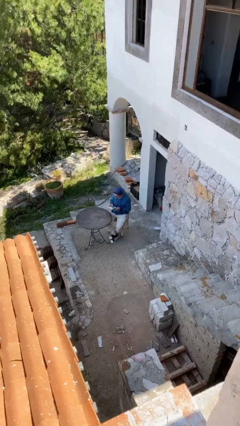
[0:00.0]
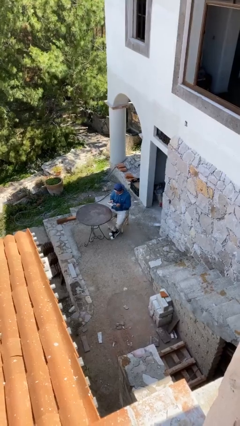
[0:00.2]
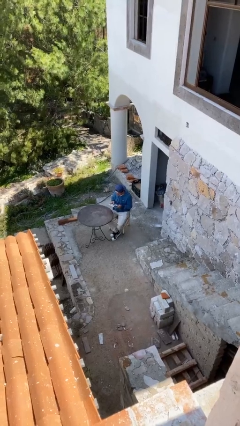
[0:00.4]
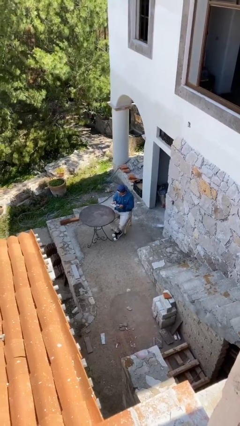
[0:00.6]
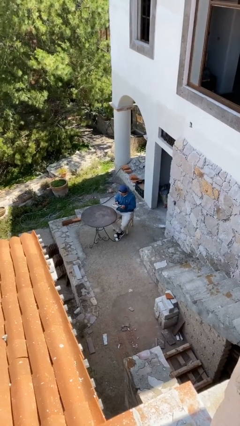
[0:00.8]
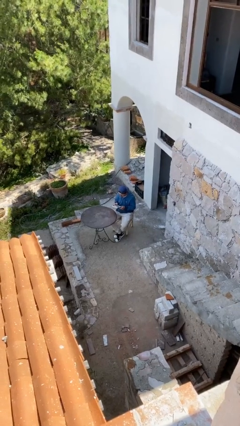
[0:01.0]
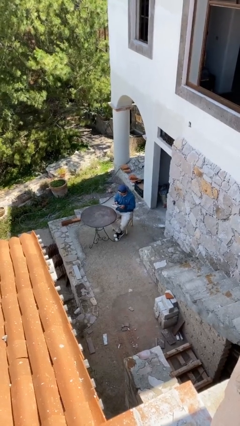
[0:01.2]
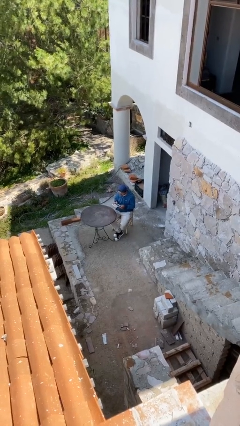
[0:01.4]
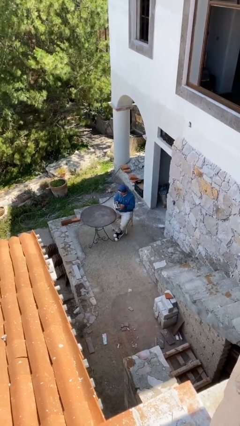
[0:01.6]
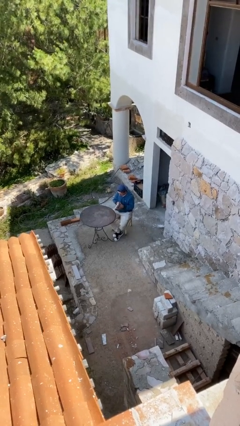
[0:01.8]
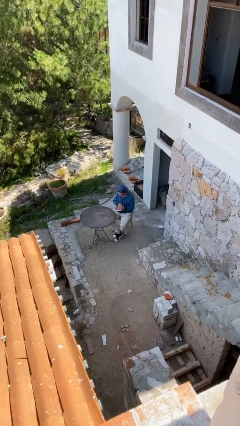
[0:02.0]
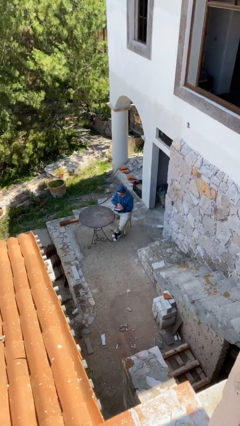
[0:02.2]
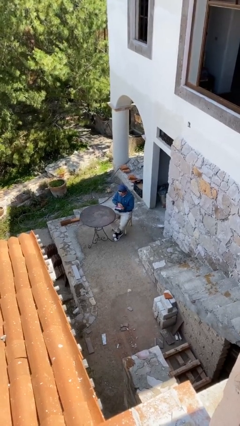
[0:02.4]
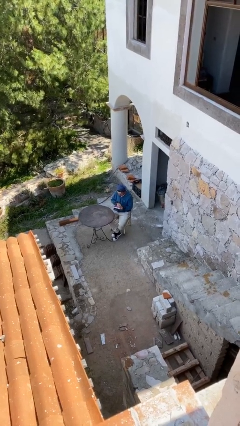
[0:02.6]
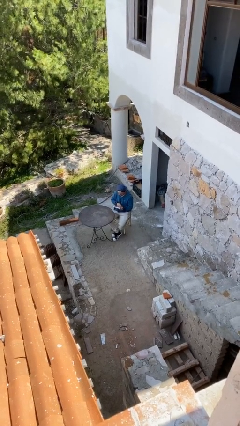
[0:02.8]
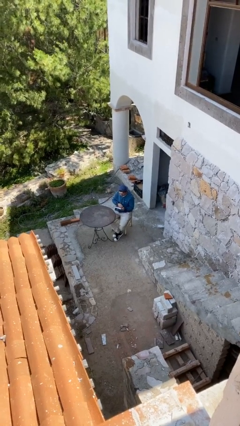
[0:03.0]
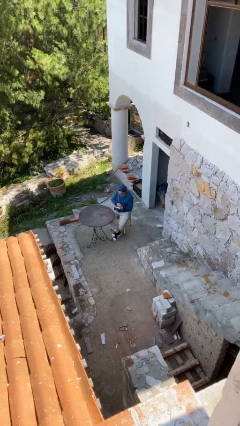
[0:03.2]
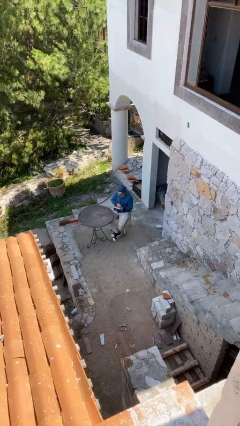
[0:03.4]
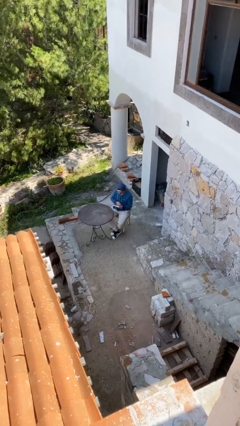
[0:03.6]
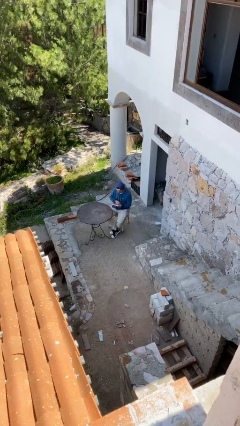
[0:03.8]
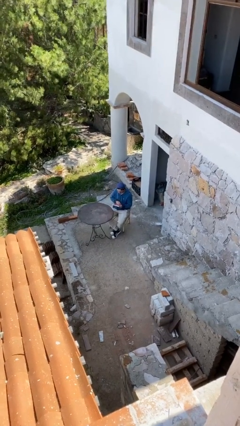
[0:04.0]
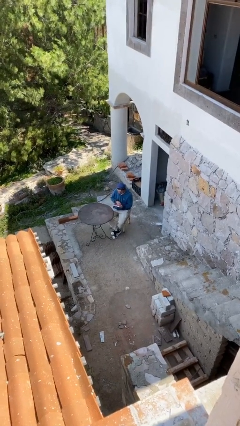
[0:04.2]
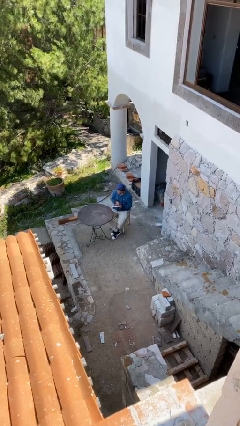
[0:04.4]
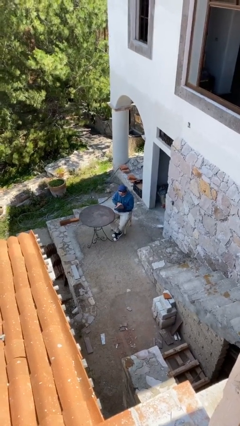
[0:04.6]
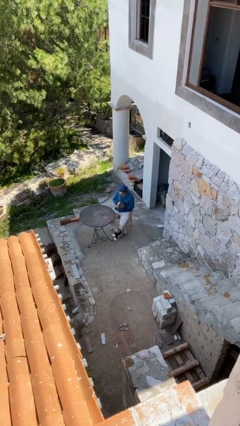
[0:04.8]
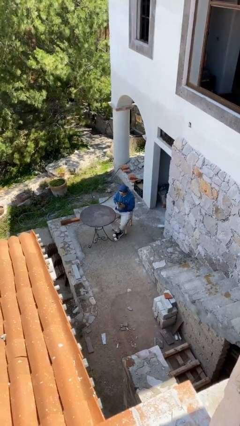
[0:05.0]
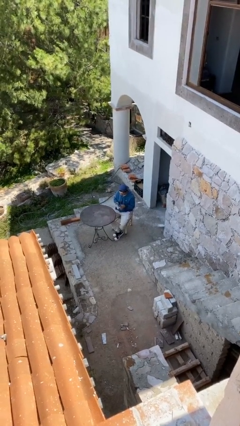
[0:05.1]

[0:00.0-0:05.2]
person reads document

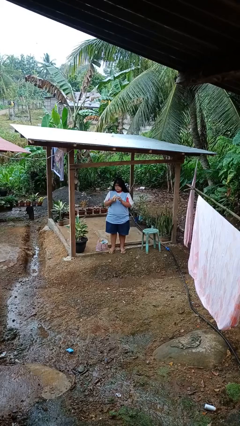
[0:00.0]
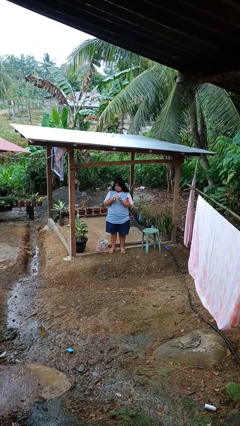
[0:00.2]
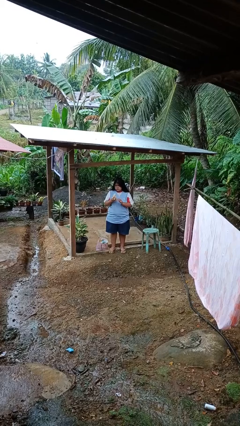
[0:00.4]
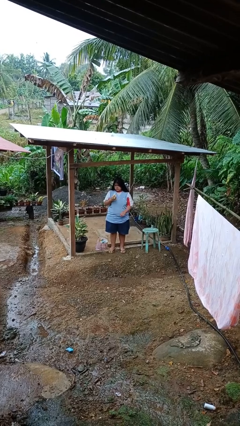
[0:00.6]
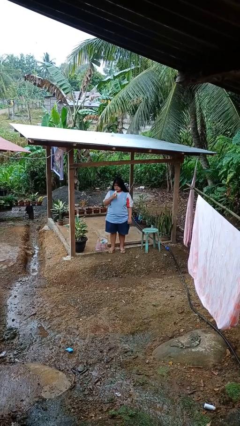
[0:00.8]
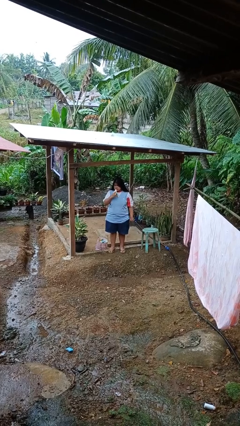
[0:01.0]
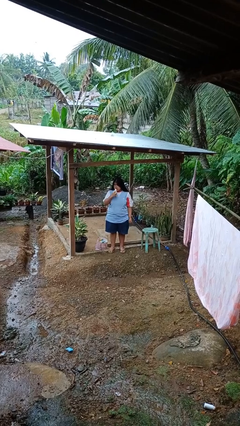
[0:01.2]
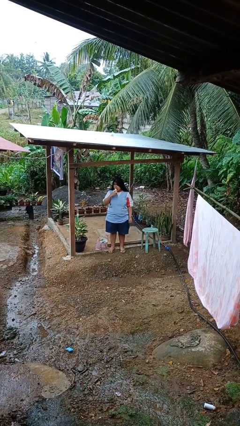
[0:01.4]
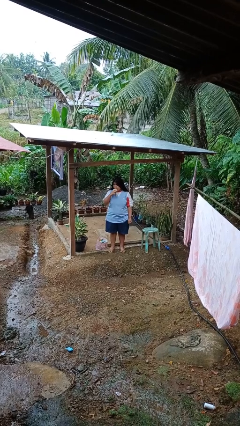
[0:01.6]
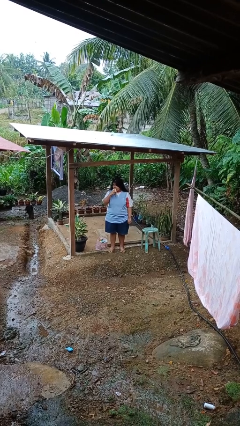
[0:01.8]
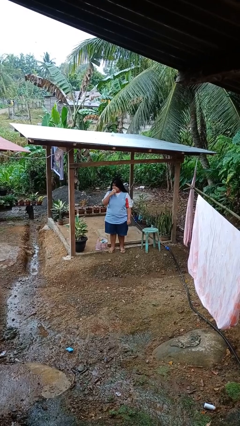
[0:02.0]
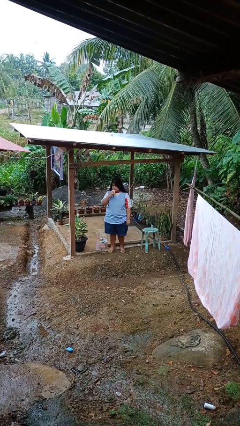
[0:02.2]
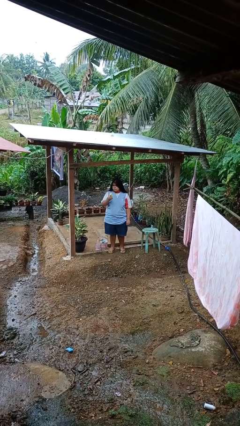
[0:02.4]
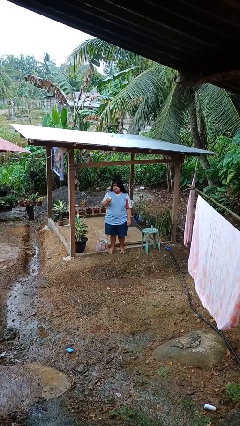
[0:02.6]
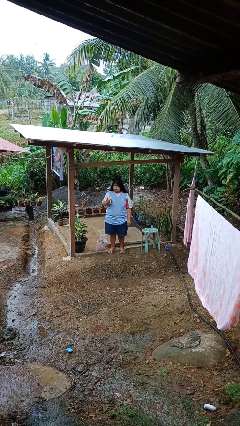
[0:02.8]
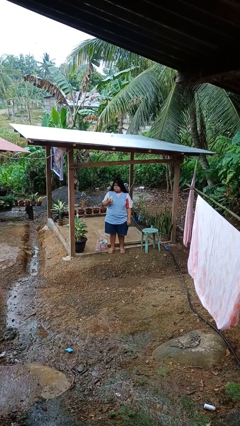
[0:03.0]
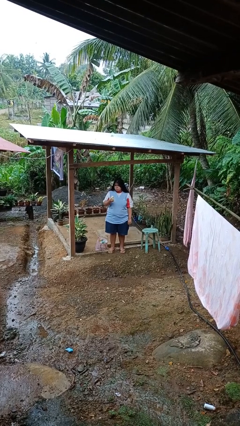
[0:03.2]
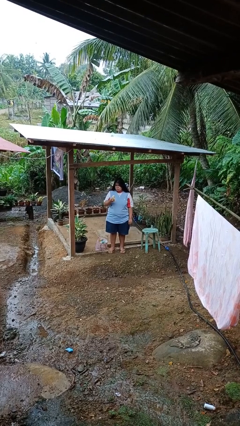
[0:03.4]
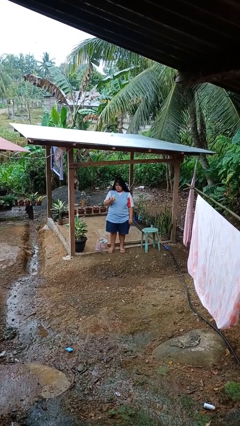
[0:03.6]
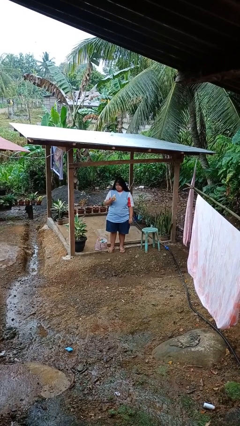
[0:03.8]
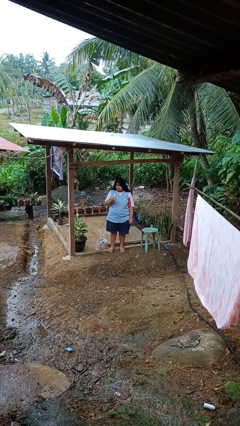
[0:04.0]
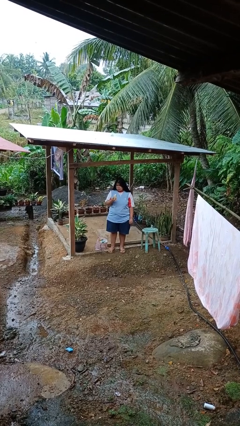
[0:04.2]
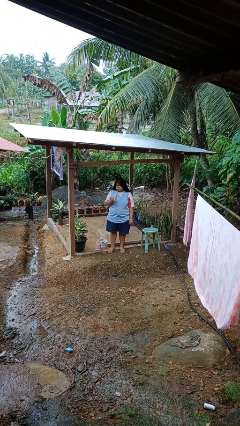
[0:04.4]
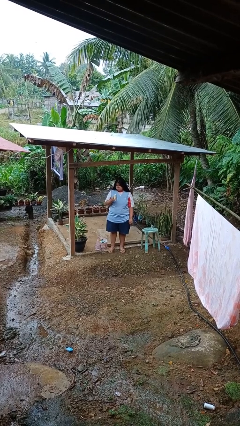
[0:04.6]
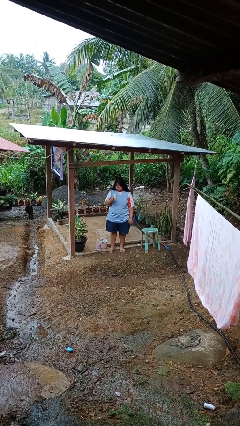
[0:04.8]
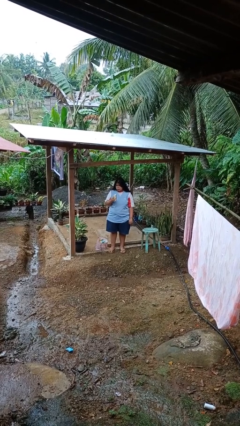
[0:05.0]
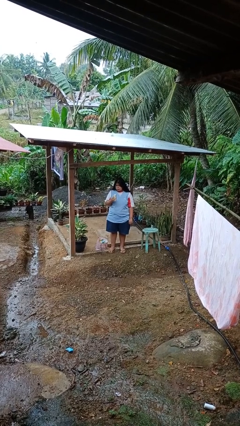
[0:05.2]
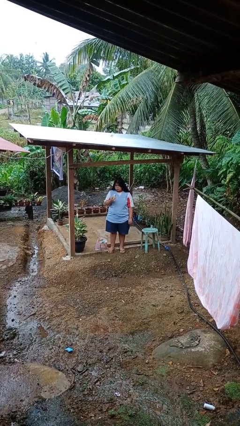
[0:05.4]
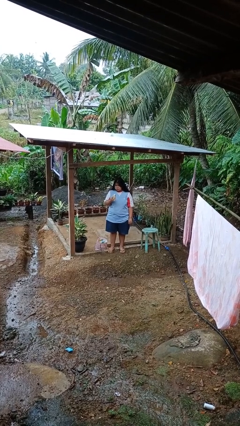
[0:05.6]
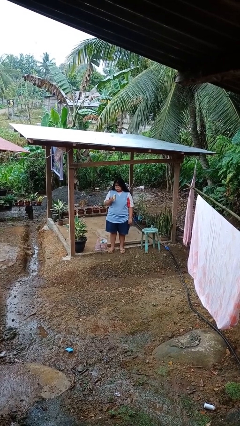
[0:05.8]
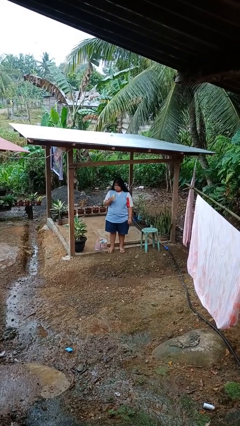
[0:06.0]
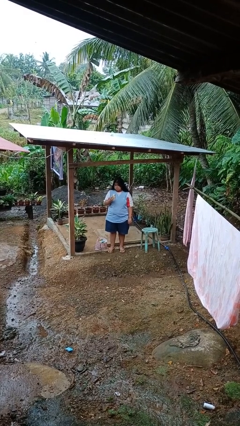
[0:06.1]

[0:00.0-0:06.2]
person eats banana

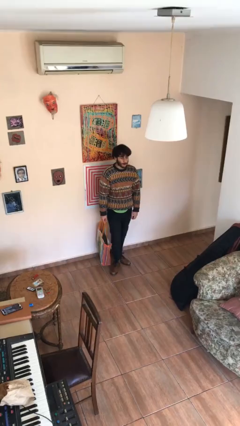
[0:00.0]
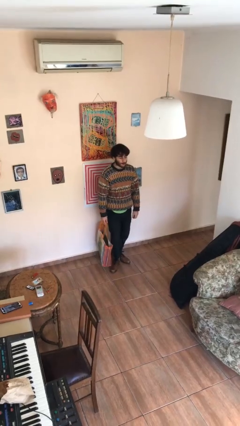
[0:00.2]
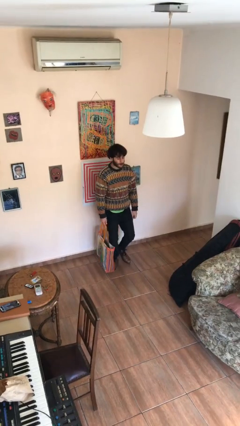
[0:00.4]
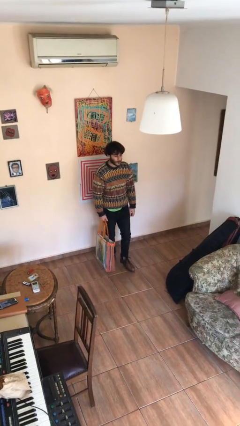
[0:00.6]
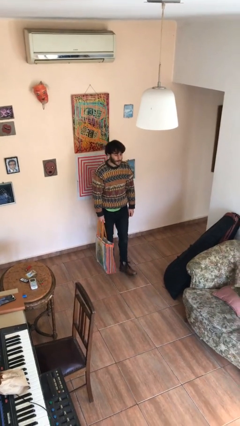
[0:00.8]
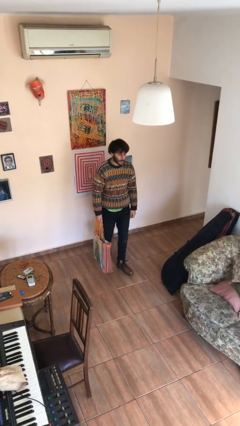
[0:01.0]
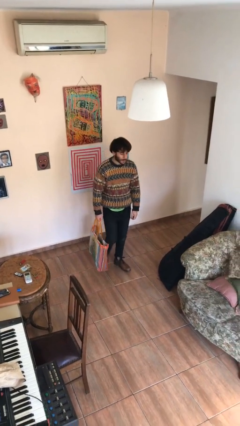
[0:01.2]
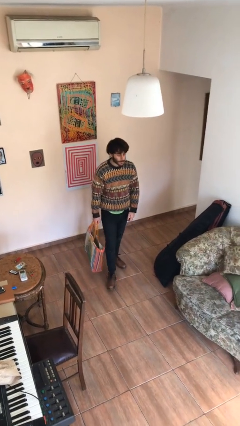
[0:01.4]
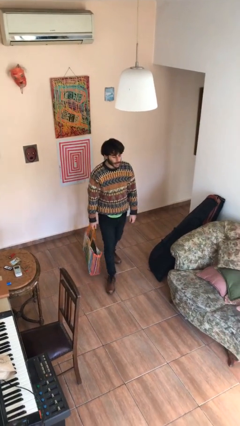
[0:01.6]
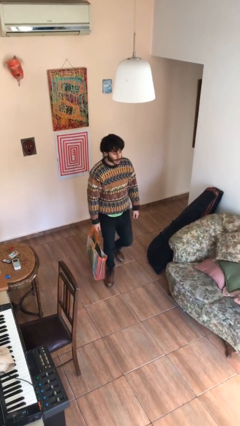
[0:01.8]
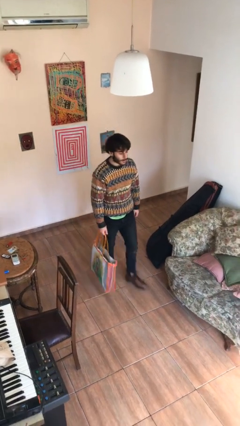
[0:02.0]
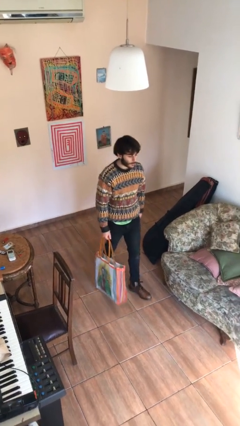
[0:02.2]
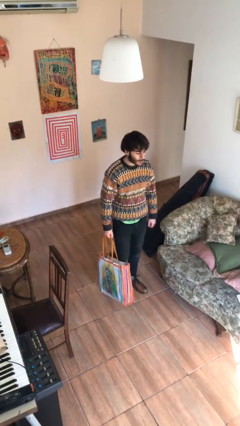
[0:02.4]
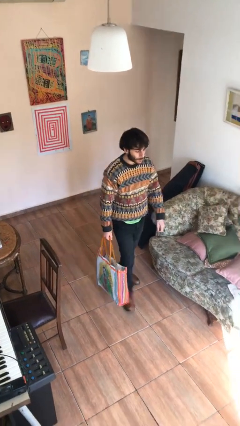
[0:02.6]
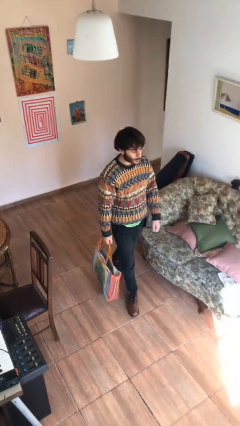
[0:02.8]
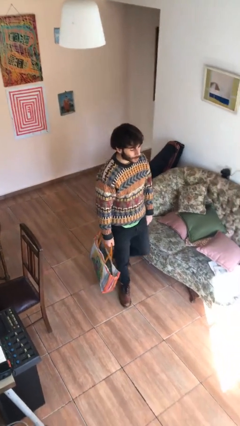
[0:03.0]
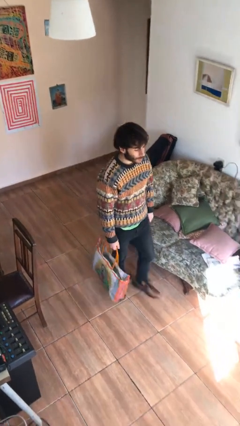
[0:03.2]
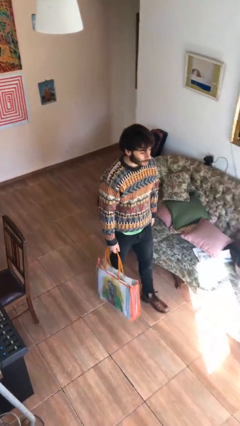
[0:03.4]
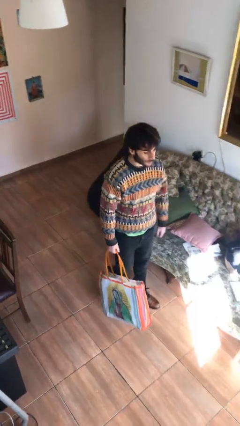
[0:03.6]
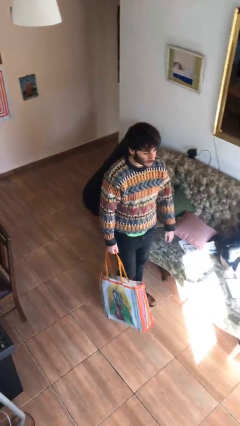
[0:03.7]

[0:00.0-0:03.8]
person carries groceries

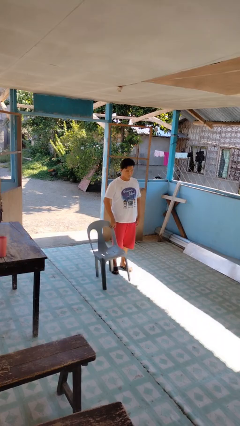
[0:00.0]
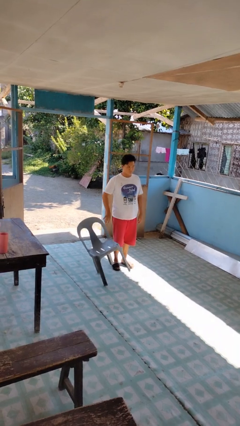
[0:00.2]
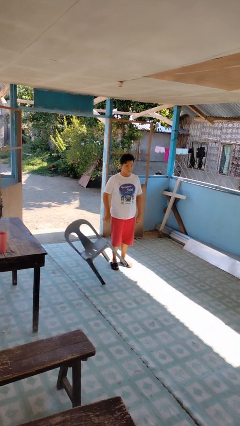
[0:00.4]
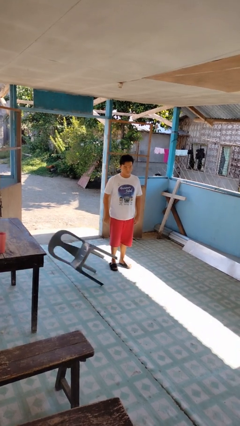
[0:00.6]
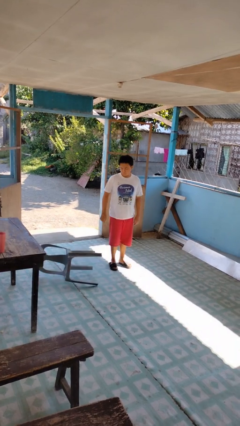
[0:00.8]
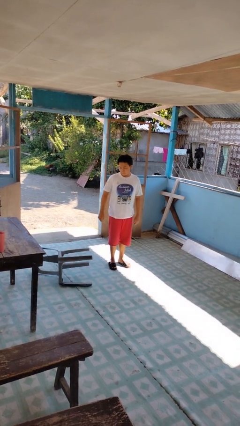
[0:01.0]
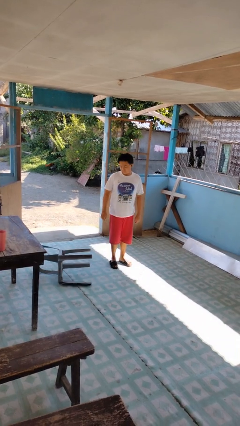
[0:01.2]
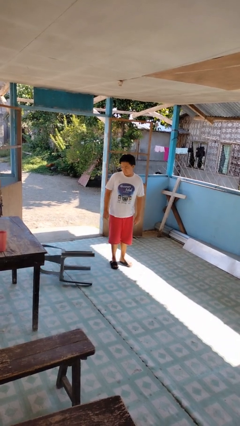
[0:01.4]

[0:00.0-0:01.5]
person knocks over furniture

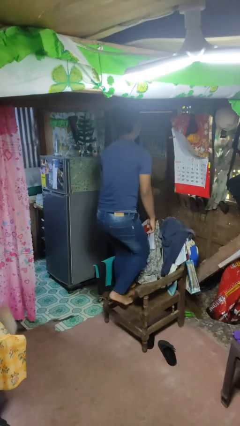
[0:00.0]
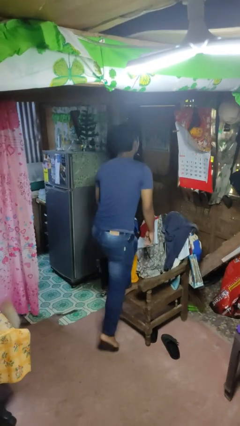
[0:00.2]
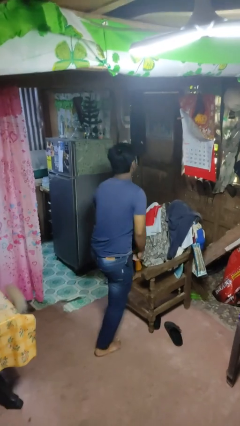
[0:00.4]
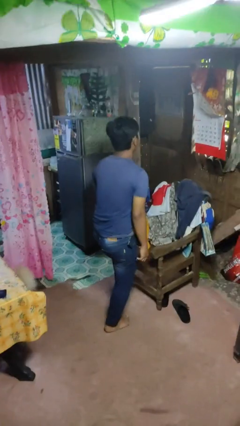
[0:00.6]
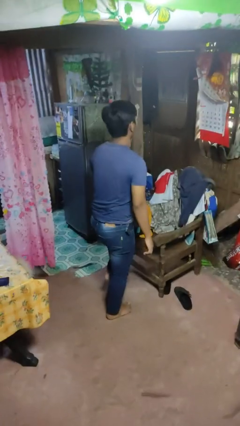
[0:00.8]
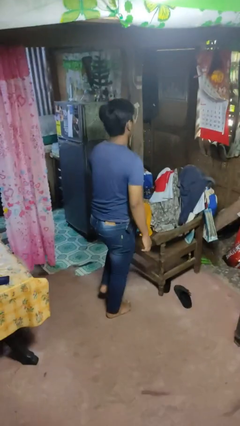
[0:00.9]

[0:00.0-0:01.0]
person climbs off chair
